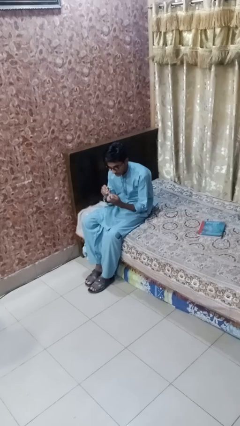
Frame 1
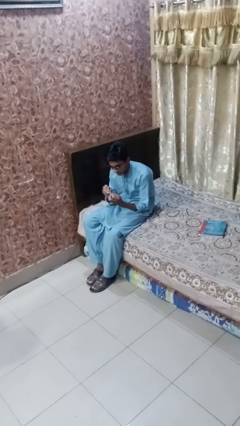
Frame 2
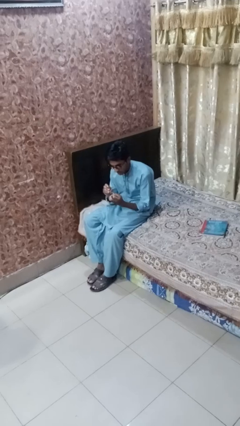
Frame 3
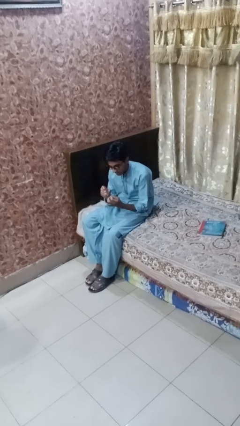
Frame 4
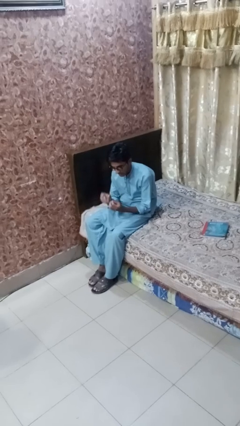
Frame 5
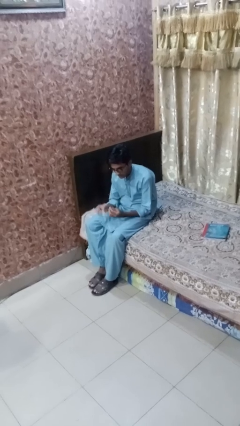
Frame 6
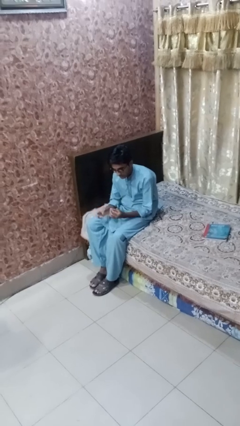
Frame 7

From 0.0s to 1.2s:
person clips fingernails

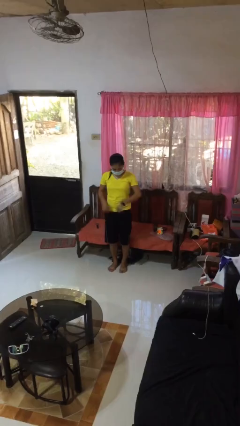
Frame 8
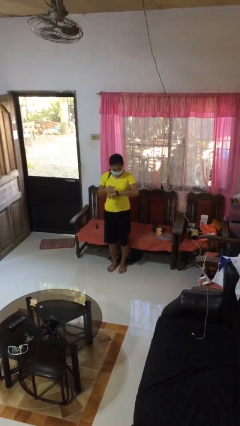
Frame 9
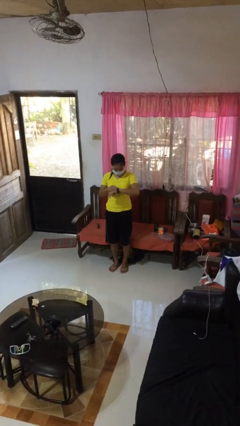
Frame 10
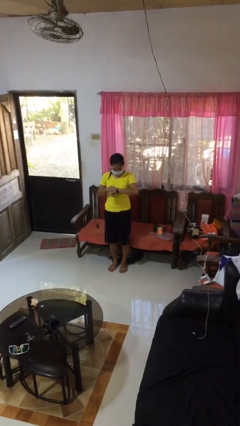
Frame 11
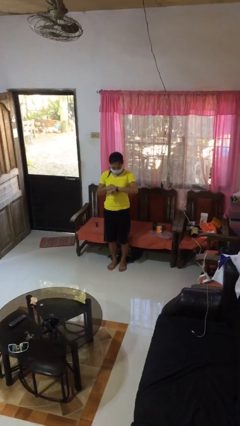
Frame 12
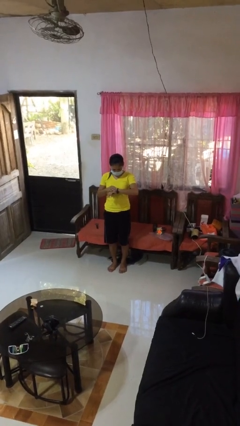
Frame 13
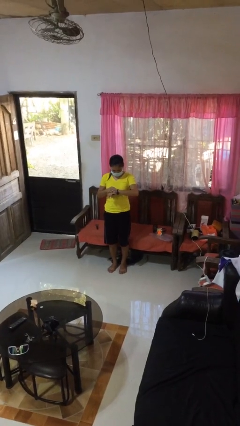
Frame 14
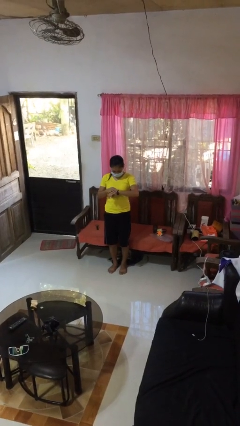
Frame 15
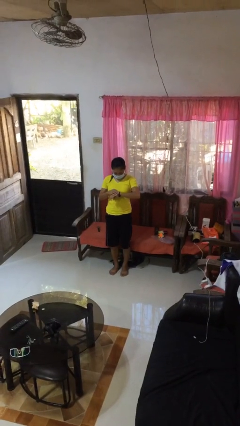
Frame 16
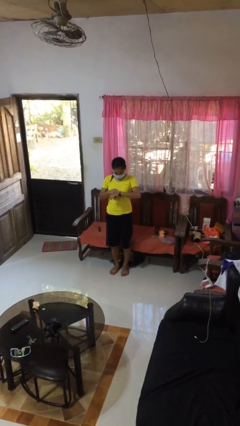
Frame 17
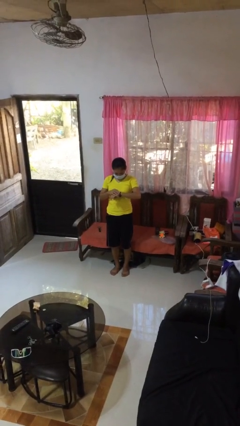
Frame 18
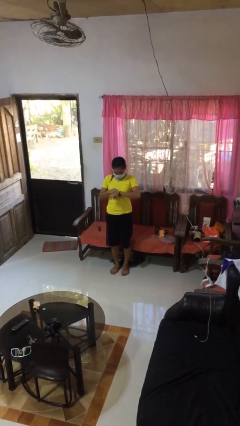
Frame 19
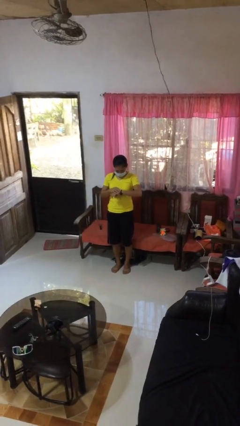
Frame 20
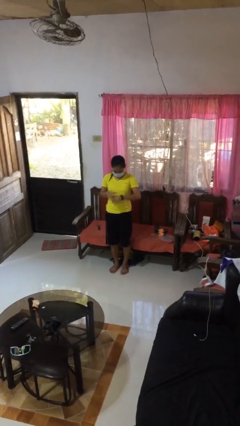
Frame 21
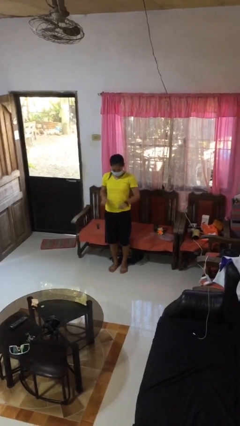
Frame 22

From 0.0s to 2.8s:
person looks at wristwatch

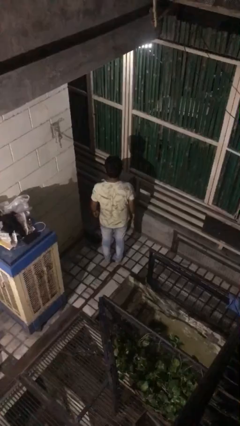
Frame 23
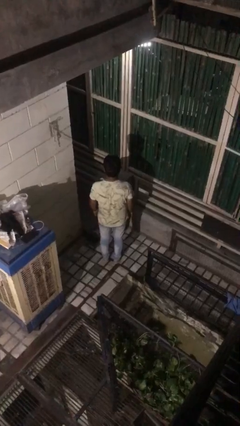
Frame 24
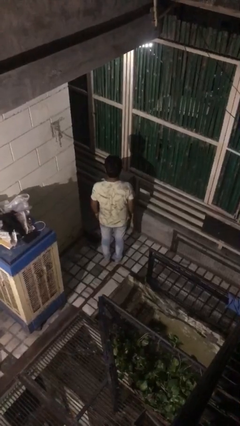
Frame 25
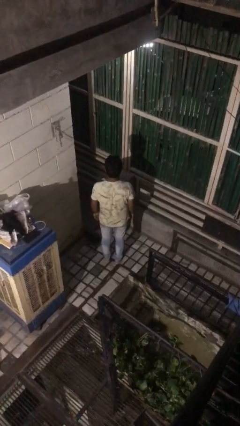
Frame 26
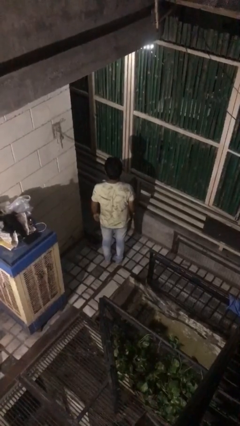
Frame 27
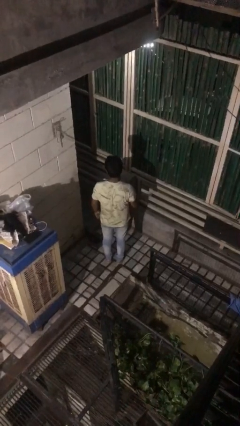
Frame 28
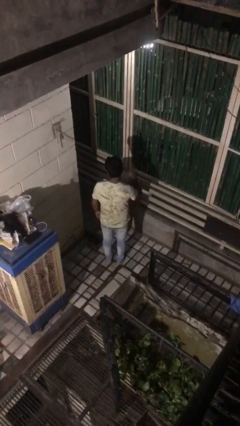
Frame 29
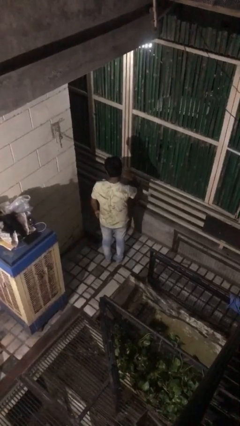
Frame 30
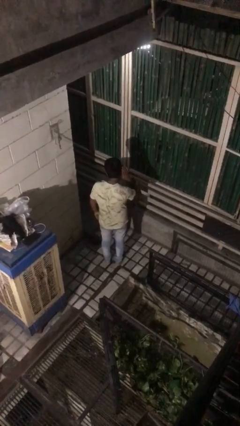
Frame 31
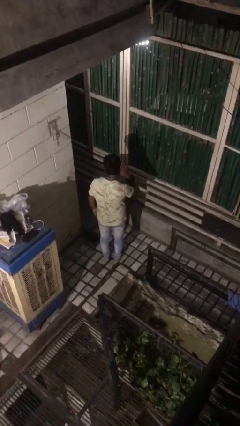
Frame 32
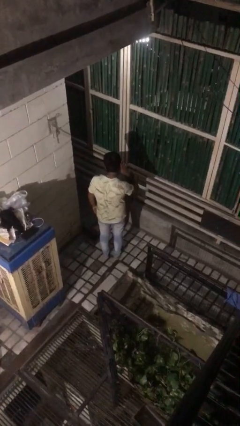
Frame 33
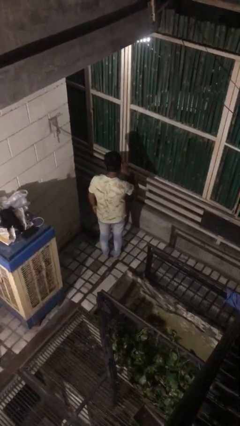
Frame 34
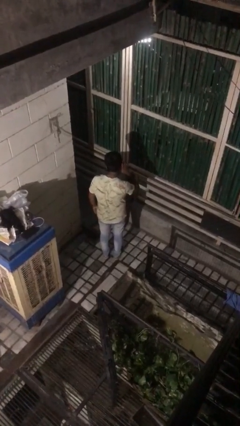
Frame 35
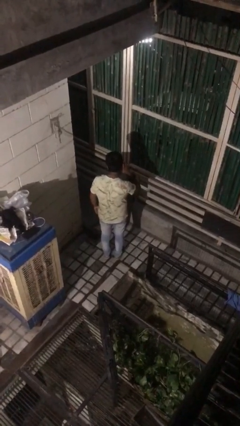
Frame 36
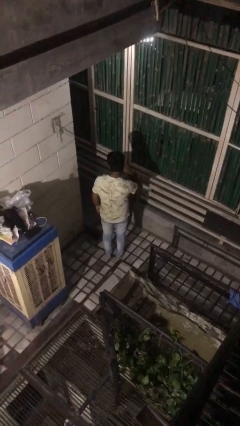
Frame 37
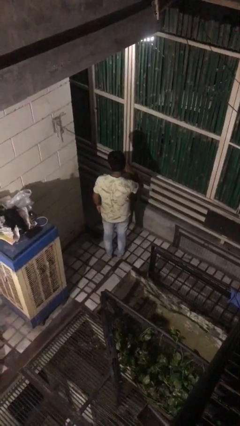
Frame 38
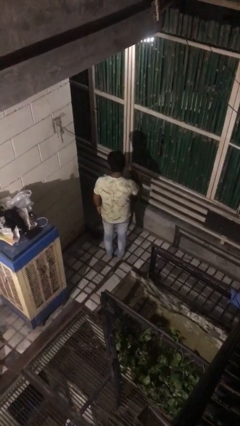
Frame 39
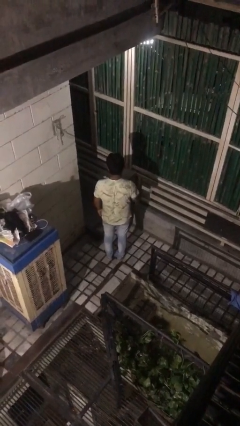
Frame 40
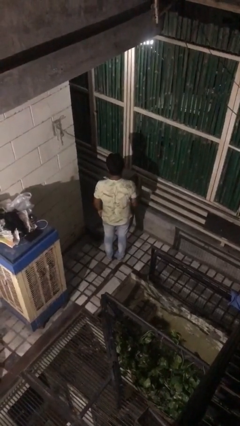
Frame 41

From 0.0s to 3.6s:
person gestures listen closely

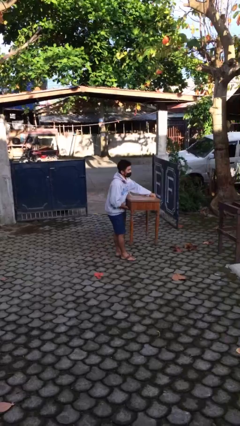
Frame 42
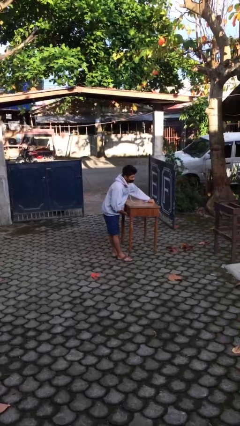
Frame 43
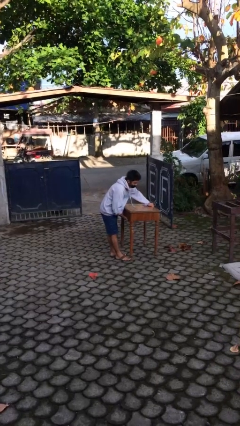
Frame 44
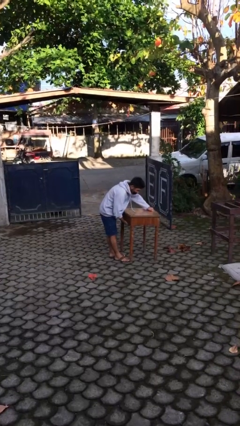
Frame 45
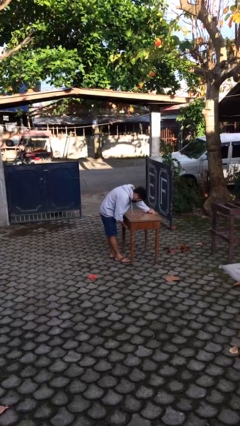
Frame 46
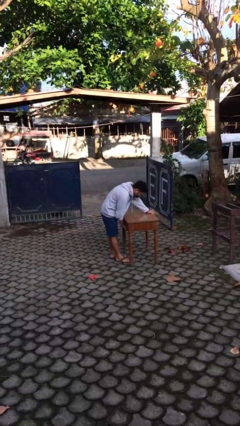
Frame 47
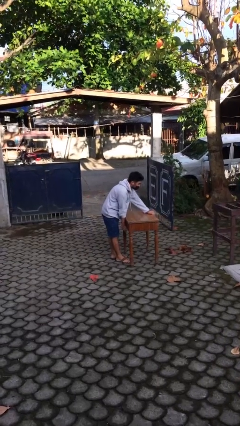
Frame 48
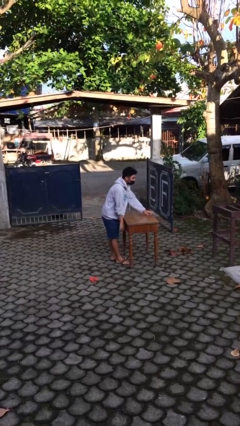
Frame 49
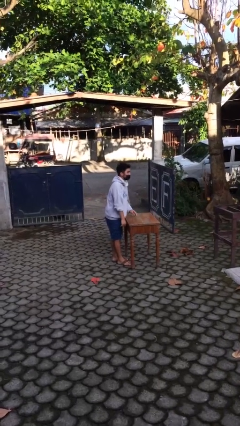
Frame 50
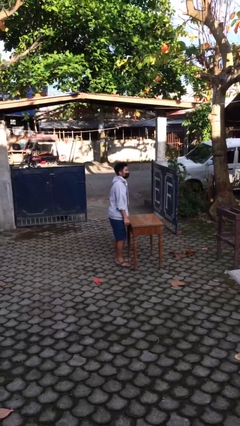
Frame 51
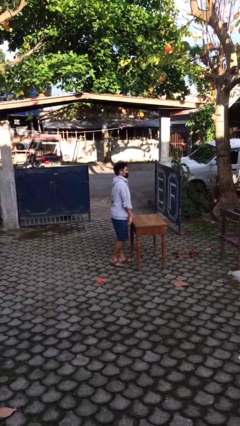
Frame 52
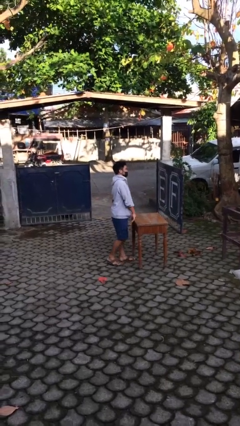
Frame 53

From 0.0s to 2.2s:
person puts down object on floor

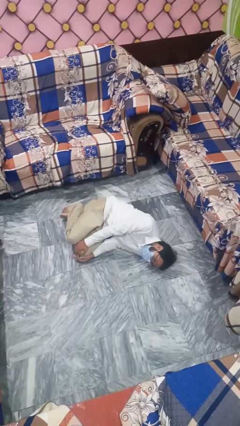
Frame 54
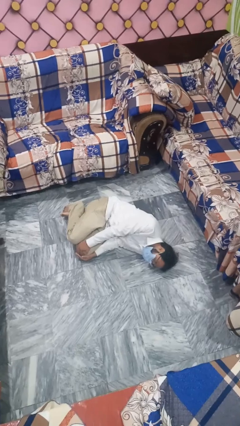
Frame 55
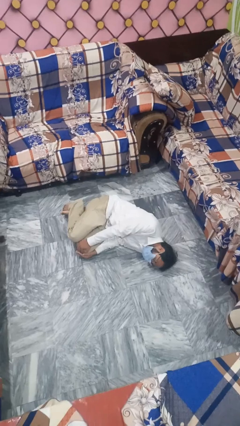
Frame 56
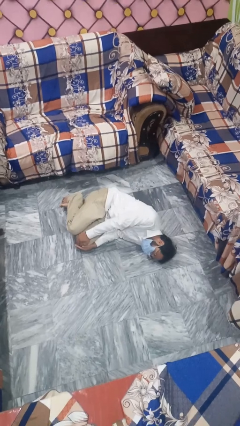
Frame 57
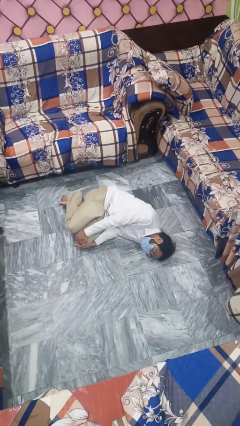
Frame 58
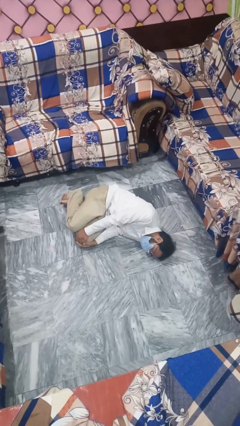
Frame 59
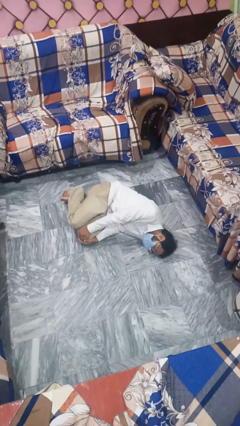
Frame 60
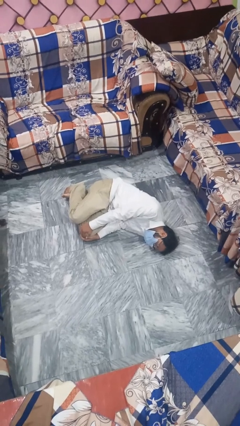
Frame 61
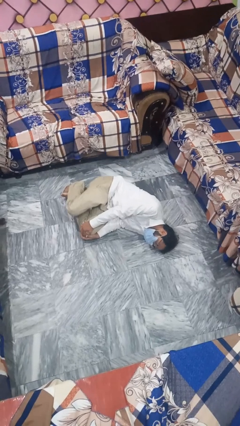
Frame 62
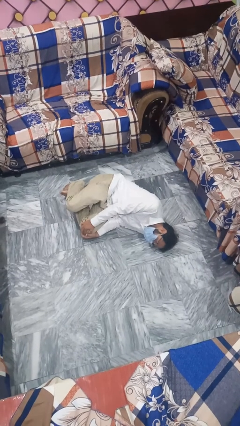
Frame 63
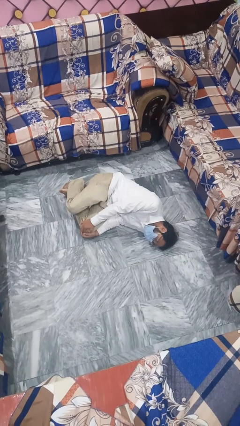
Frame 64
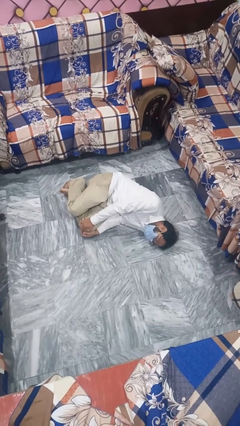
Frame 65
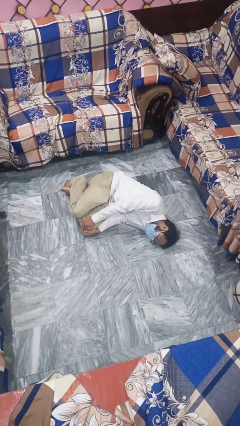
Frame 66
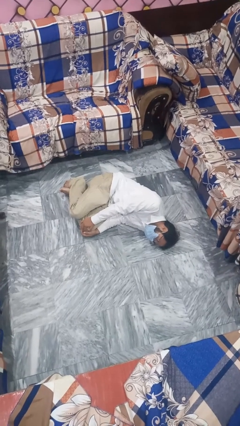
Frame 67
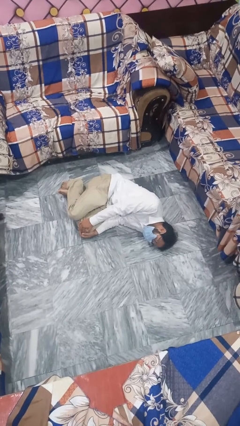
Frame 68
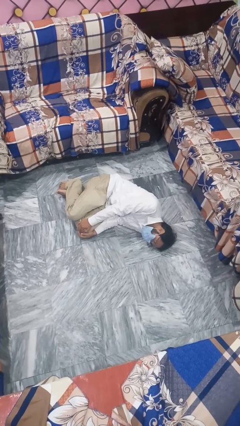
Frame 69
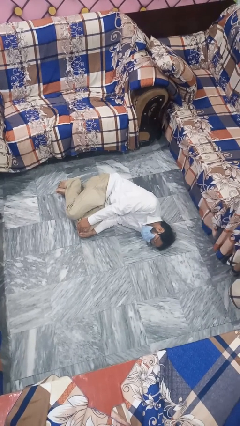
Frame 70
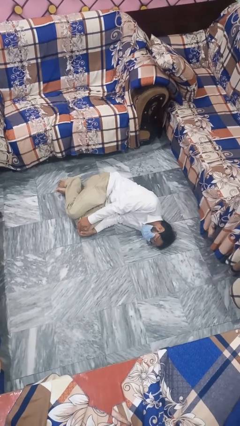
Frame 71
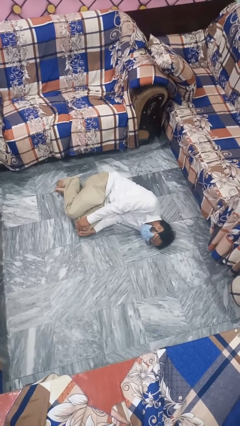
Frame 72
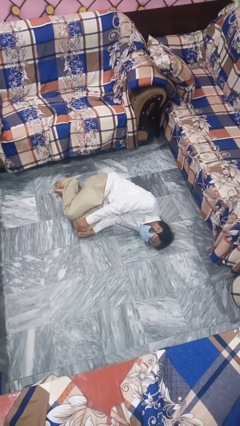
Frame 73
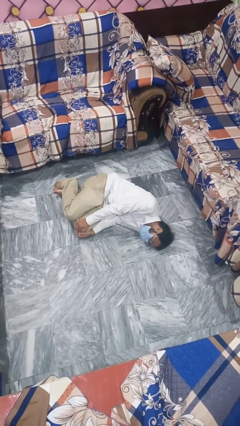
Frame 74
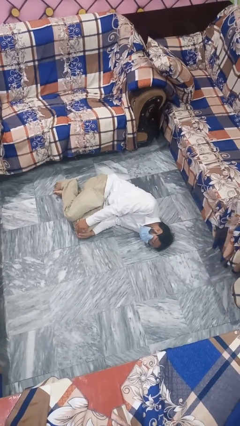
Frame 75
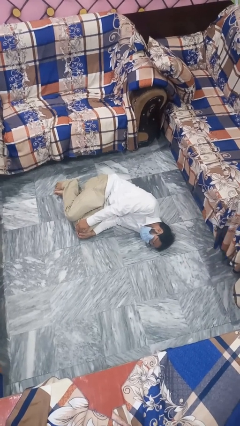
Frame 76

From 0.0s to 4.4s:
person lies down on floor

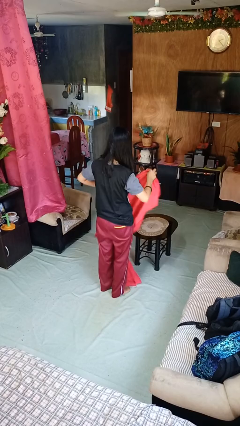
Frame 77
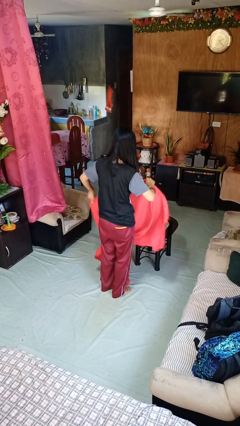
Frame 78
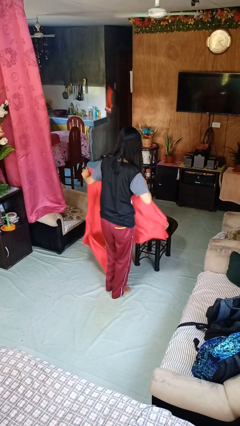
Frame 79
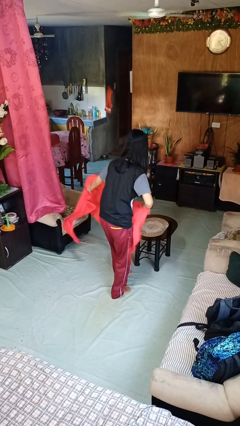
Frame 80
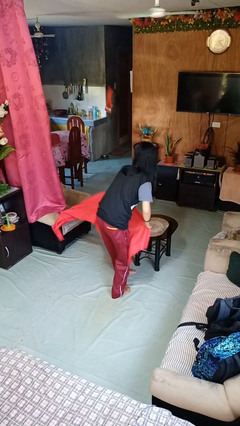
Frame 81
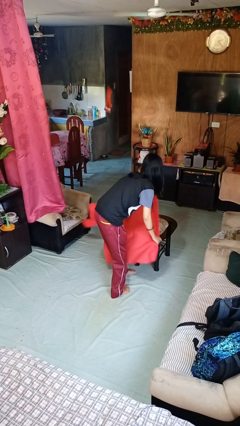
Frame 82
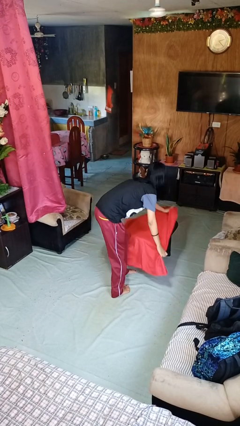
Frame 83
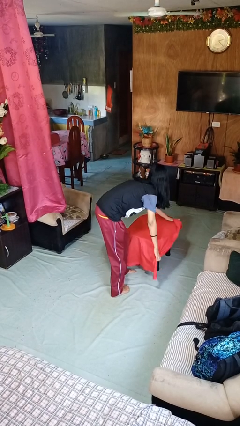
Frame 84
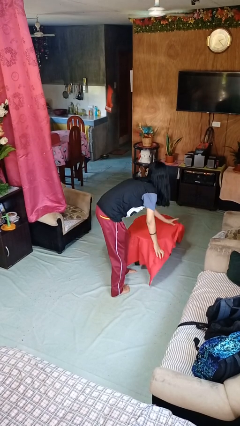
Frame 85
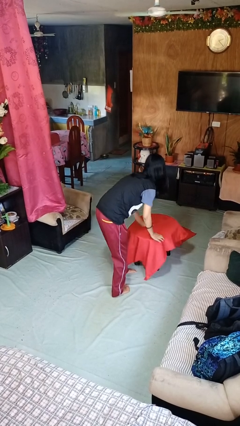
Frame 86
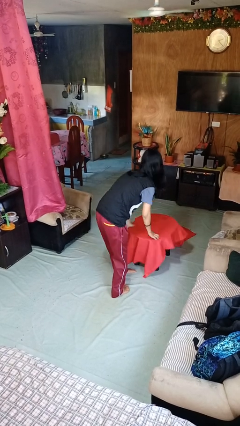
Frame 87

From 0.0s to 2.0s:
person spreads tablecloth

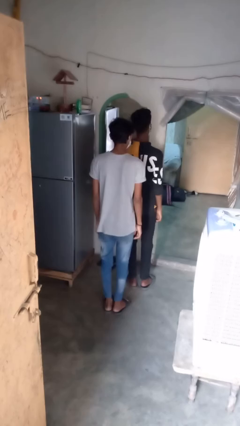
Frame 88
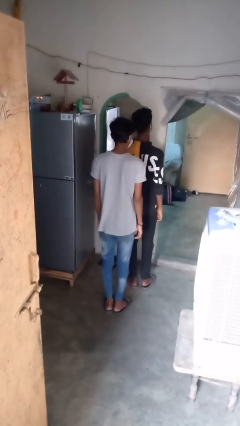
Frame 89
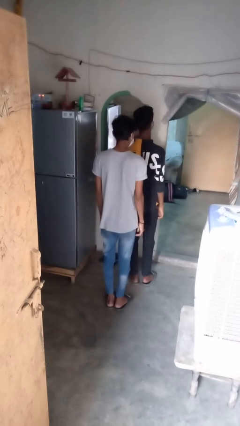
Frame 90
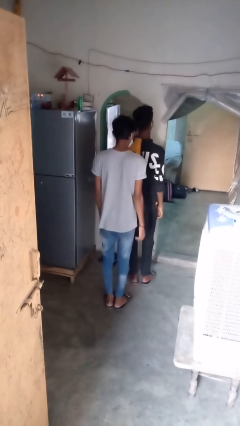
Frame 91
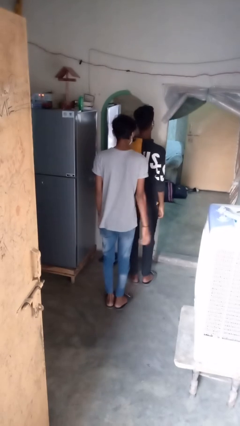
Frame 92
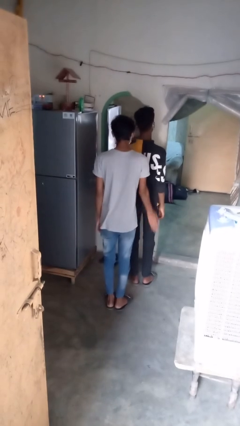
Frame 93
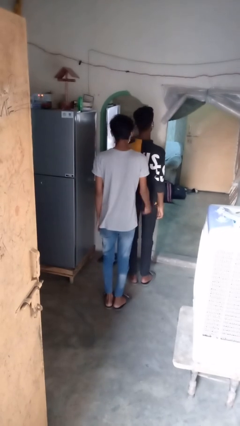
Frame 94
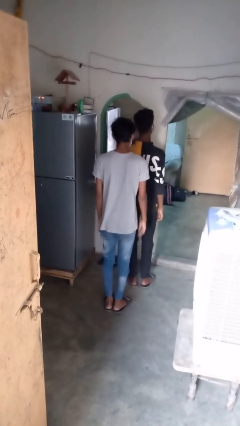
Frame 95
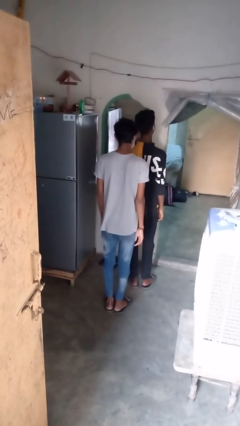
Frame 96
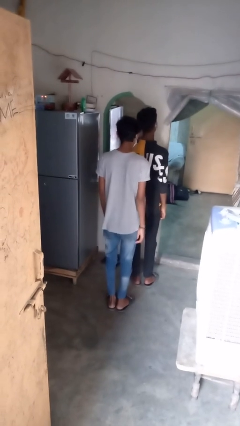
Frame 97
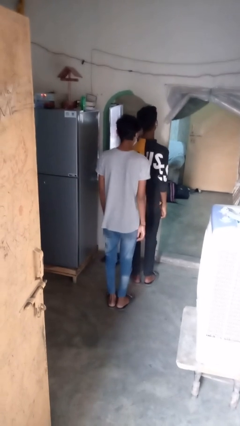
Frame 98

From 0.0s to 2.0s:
person bumps into person
